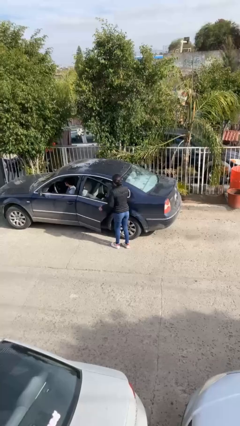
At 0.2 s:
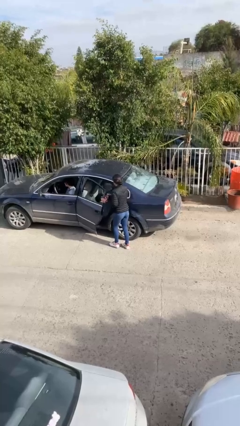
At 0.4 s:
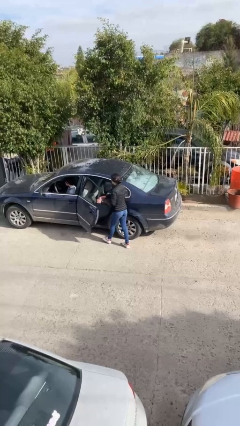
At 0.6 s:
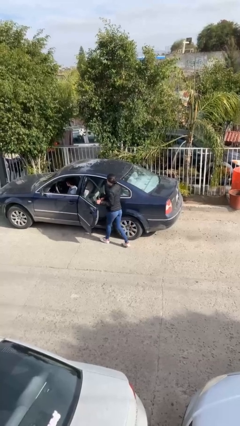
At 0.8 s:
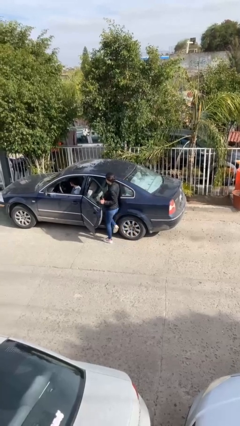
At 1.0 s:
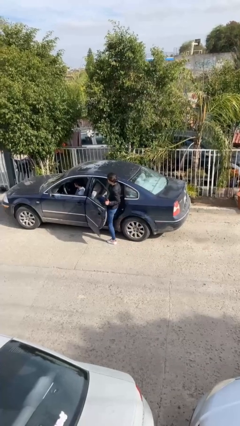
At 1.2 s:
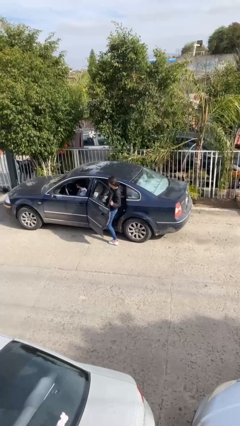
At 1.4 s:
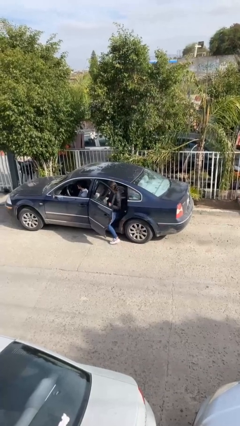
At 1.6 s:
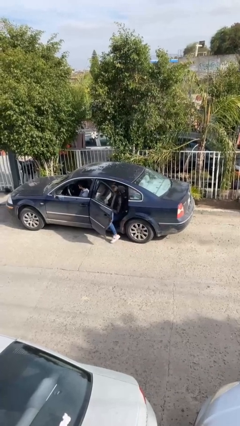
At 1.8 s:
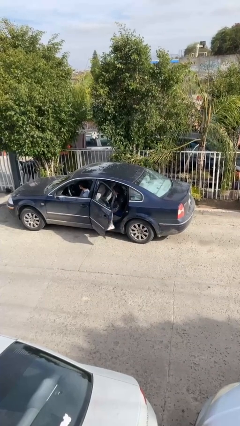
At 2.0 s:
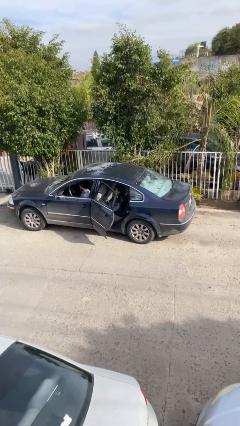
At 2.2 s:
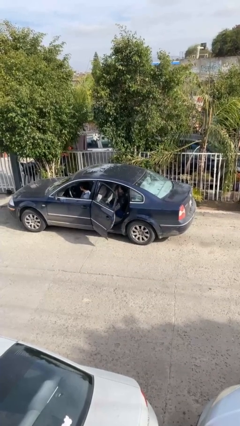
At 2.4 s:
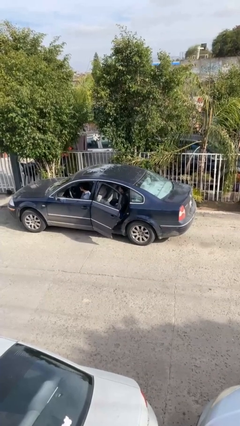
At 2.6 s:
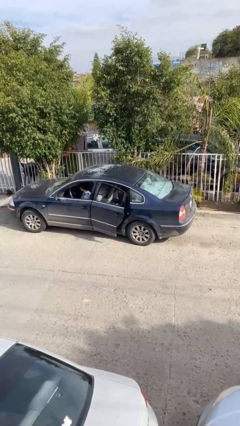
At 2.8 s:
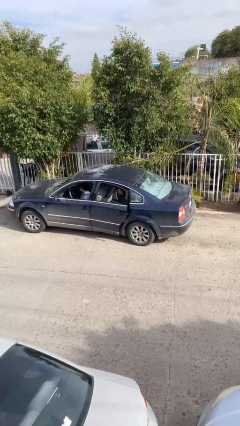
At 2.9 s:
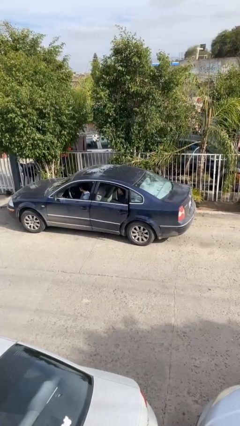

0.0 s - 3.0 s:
car picks up person

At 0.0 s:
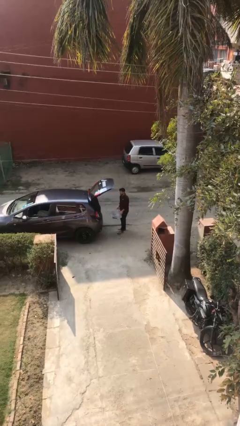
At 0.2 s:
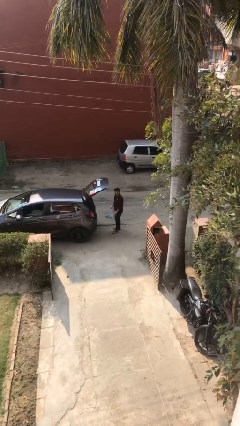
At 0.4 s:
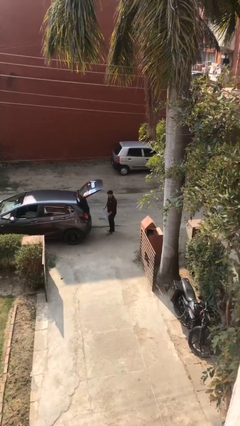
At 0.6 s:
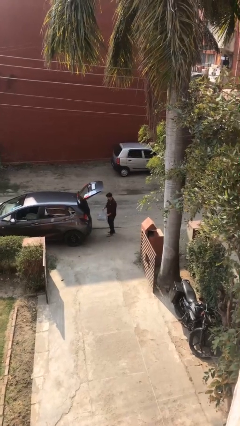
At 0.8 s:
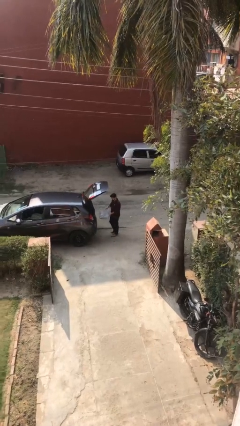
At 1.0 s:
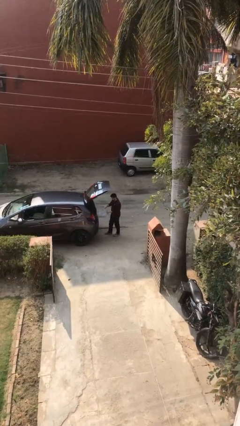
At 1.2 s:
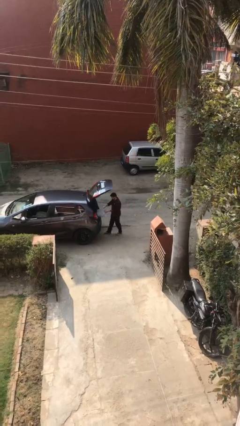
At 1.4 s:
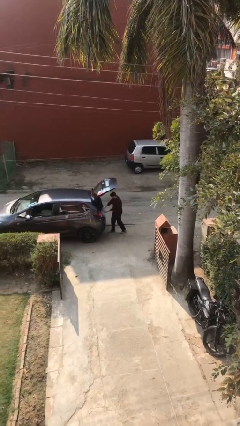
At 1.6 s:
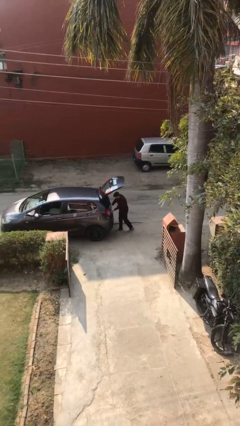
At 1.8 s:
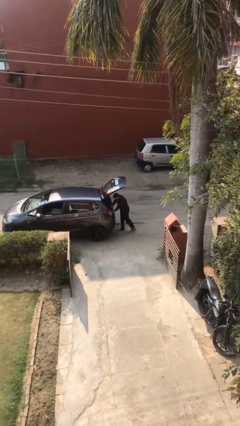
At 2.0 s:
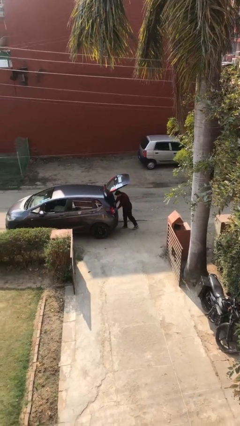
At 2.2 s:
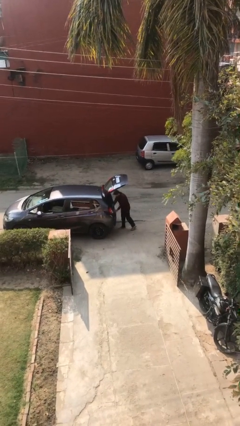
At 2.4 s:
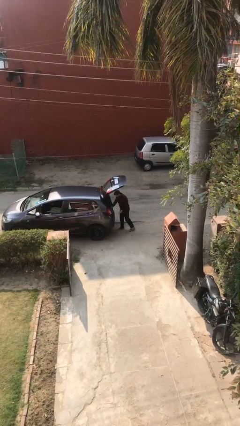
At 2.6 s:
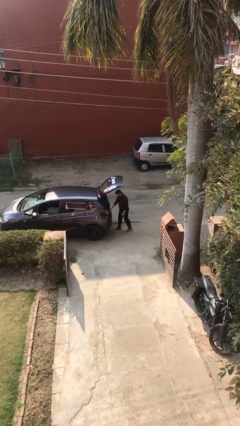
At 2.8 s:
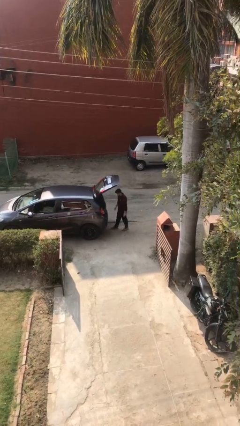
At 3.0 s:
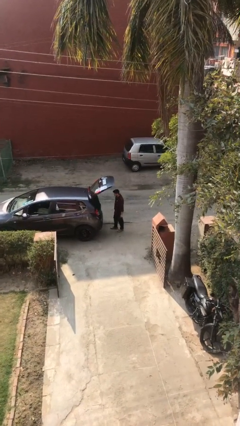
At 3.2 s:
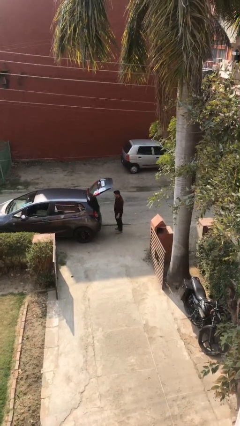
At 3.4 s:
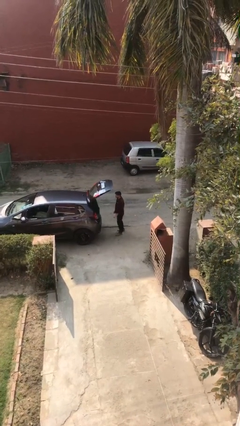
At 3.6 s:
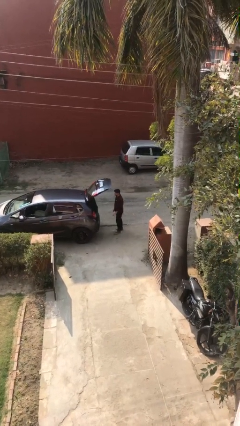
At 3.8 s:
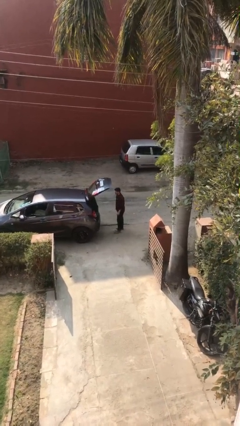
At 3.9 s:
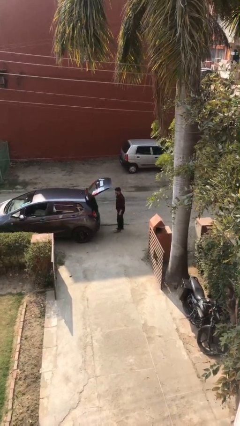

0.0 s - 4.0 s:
person loads car

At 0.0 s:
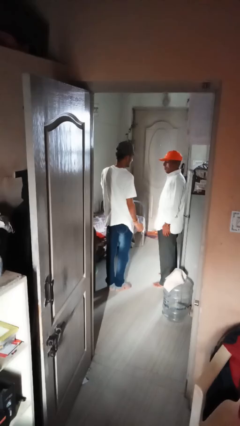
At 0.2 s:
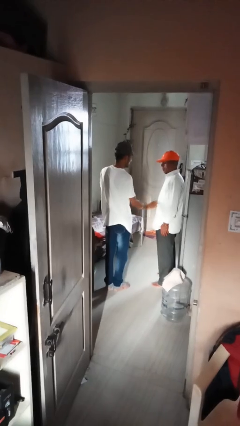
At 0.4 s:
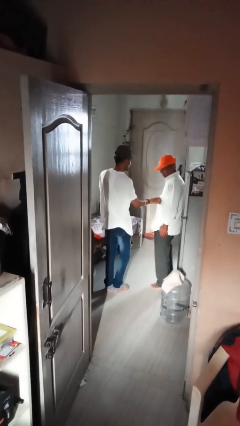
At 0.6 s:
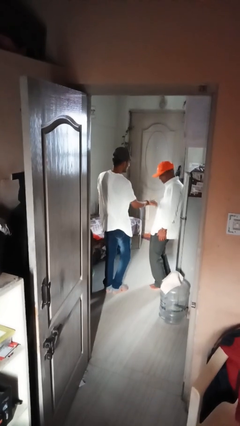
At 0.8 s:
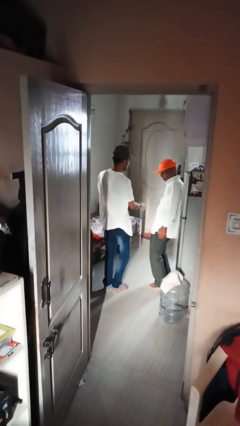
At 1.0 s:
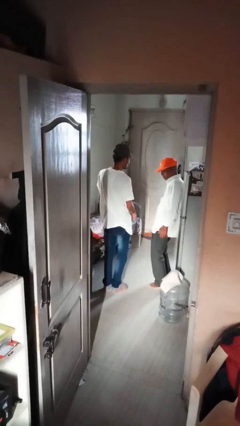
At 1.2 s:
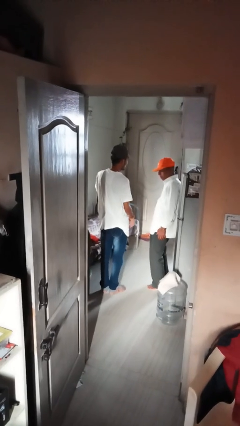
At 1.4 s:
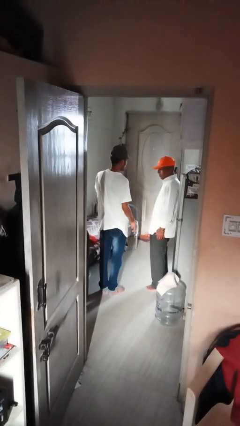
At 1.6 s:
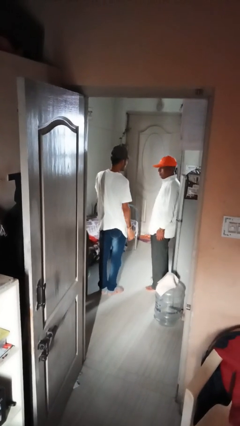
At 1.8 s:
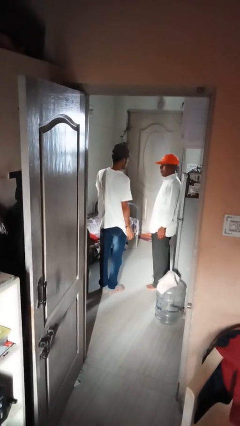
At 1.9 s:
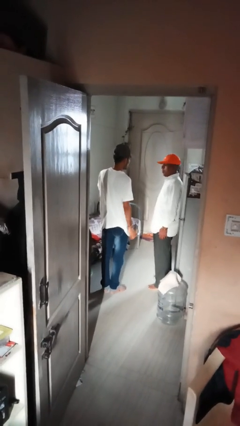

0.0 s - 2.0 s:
person tickles person

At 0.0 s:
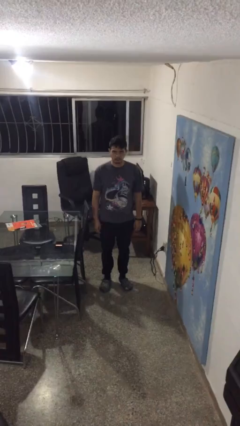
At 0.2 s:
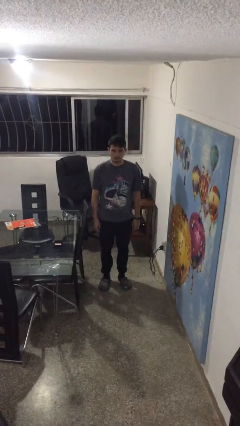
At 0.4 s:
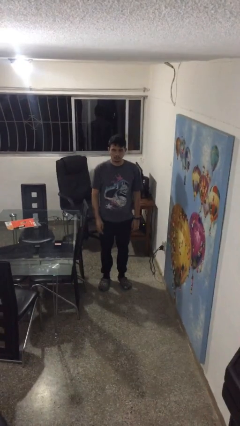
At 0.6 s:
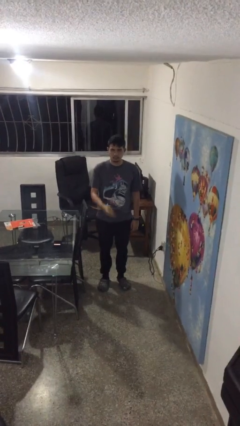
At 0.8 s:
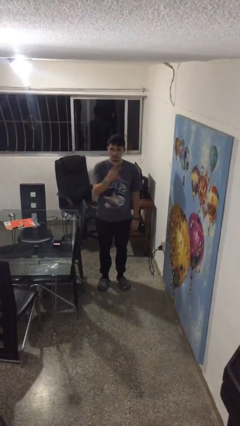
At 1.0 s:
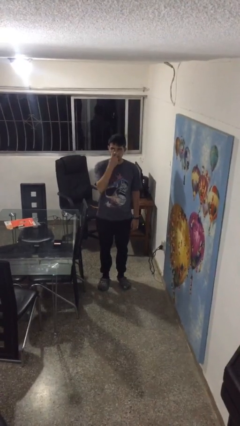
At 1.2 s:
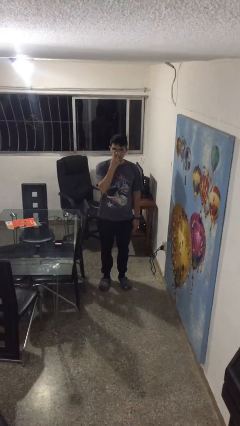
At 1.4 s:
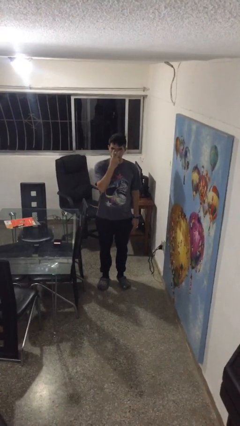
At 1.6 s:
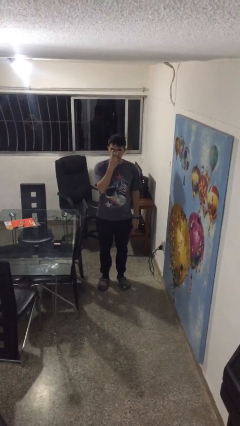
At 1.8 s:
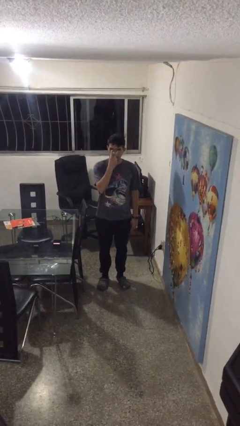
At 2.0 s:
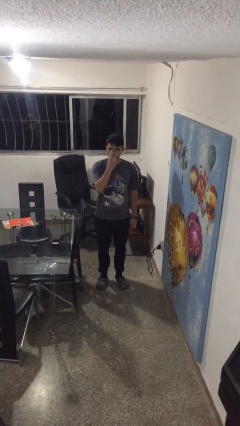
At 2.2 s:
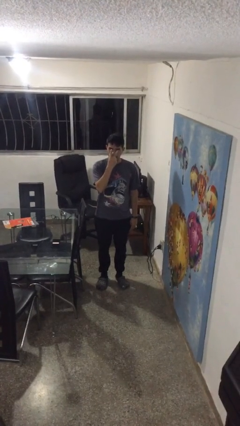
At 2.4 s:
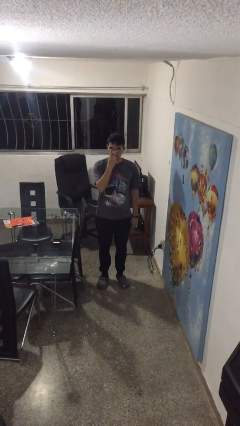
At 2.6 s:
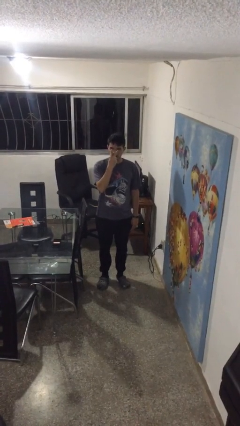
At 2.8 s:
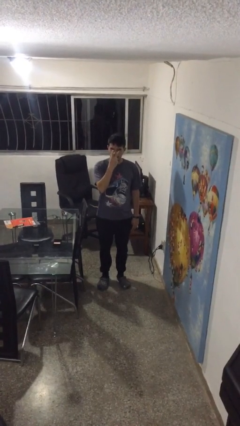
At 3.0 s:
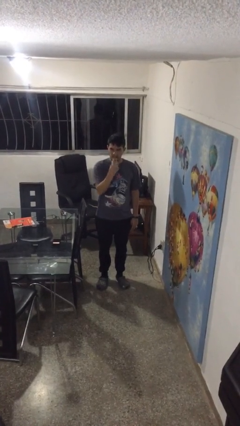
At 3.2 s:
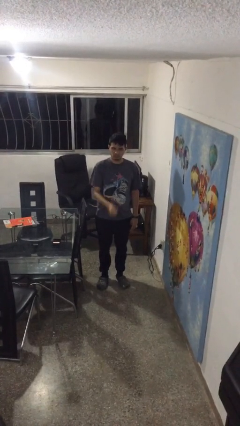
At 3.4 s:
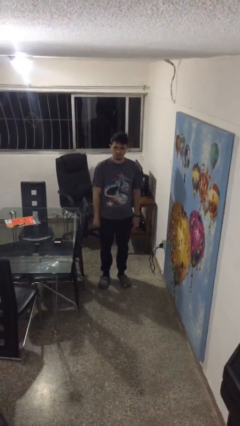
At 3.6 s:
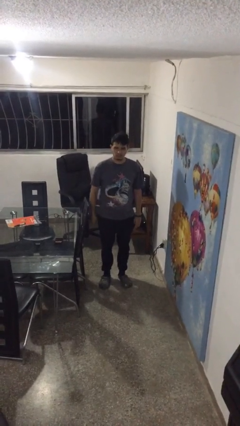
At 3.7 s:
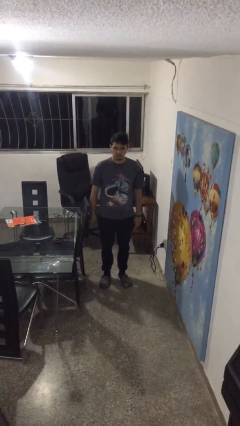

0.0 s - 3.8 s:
person gestures watch closely

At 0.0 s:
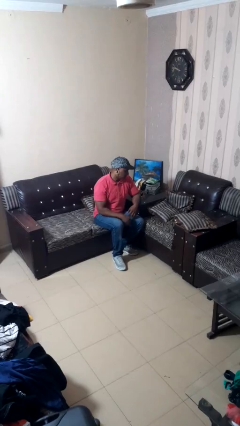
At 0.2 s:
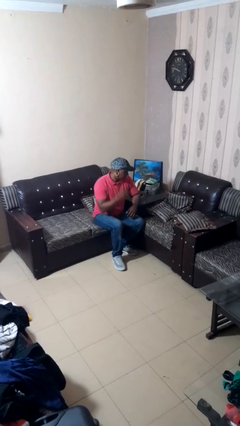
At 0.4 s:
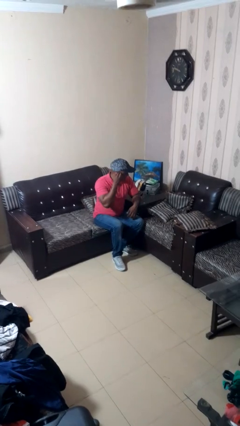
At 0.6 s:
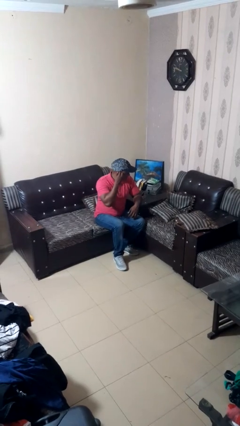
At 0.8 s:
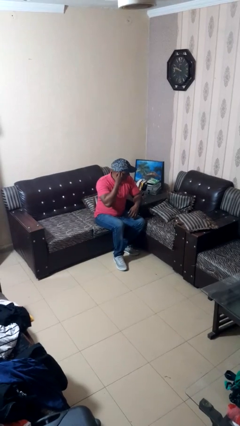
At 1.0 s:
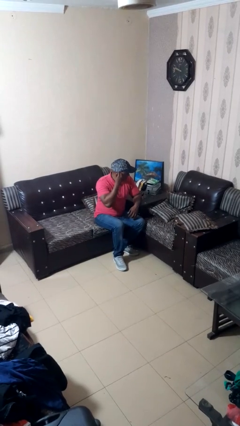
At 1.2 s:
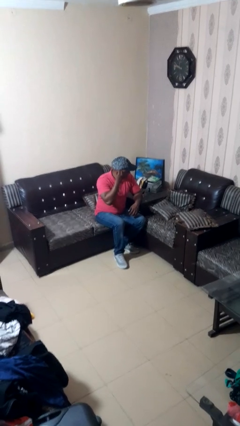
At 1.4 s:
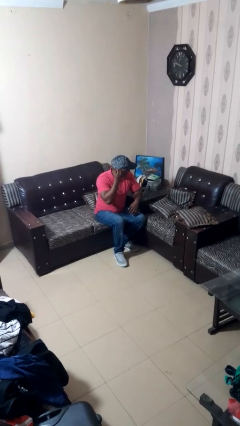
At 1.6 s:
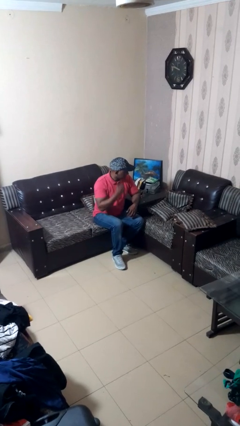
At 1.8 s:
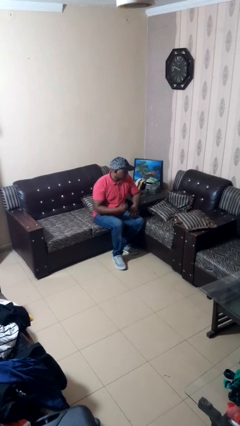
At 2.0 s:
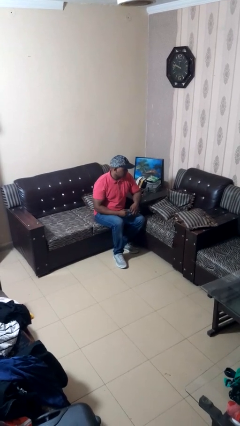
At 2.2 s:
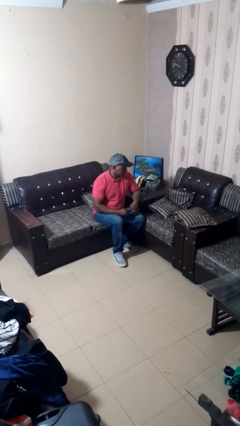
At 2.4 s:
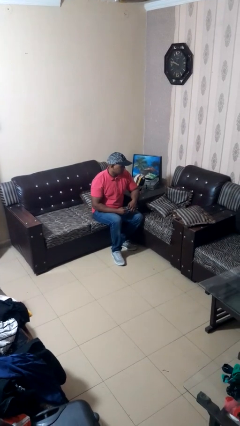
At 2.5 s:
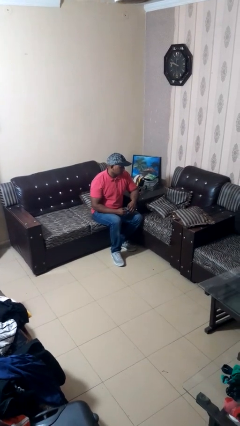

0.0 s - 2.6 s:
person takes off earrings

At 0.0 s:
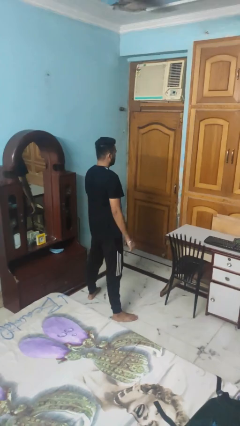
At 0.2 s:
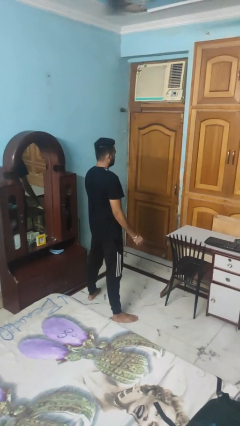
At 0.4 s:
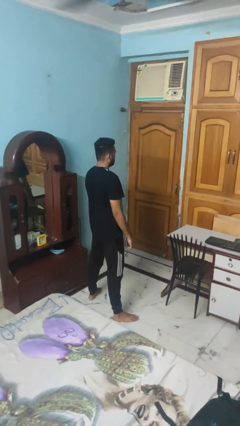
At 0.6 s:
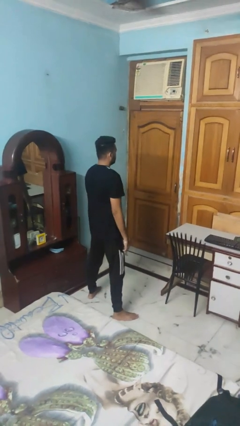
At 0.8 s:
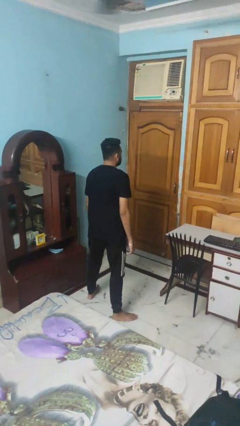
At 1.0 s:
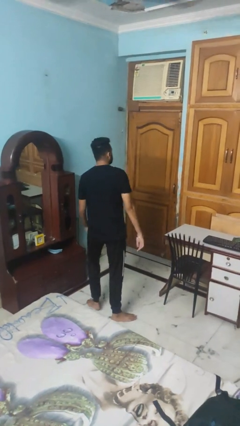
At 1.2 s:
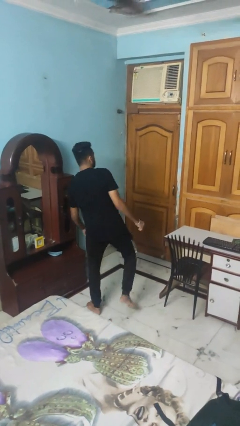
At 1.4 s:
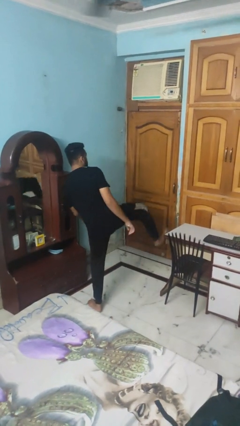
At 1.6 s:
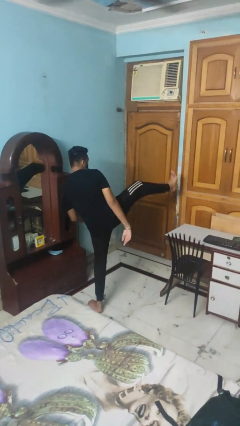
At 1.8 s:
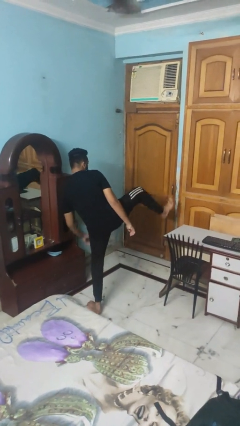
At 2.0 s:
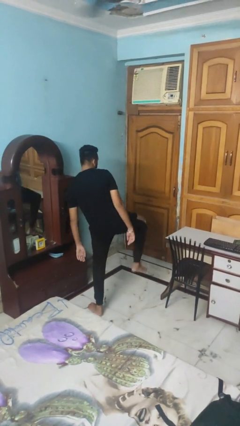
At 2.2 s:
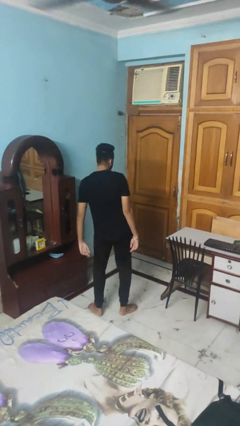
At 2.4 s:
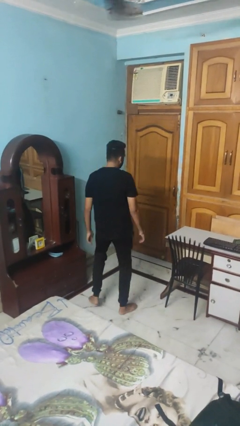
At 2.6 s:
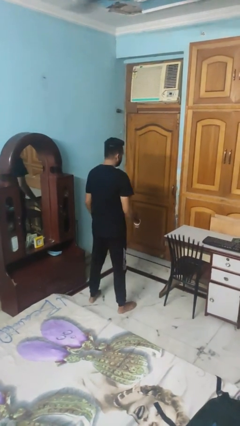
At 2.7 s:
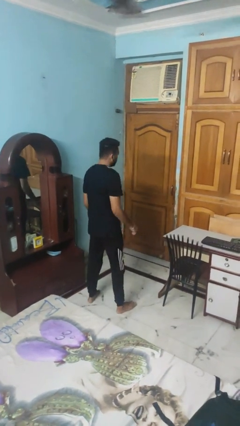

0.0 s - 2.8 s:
person karate kicks
